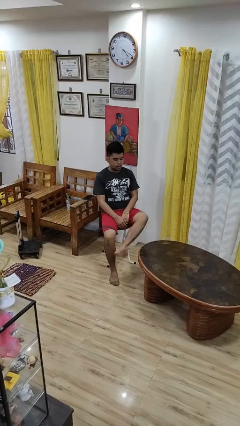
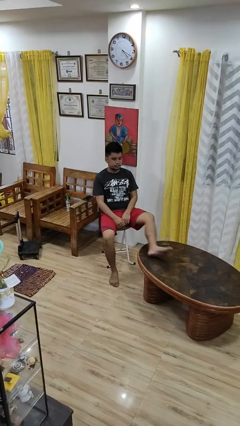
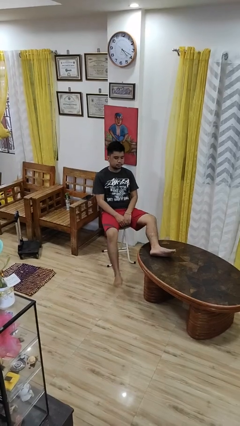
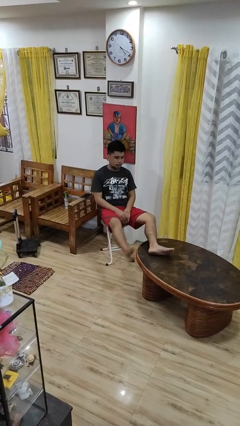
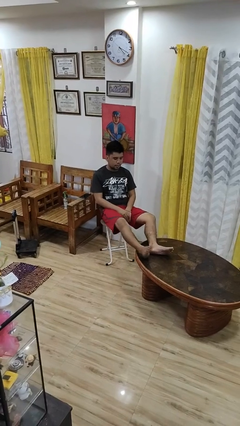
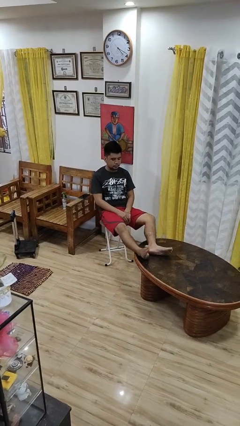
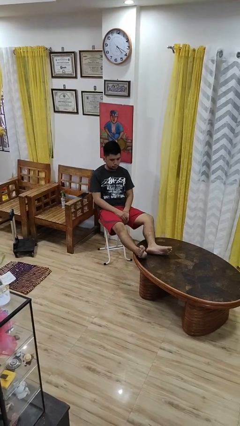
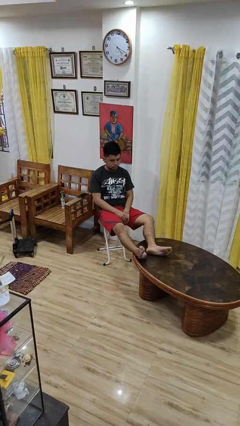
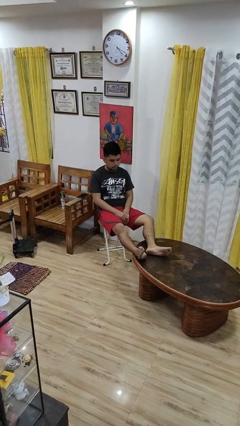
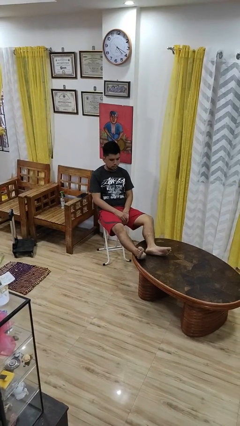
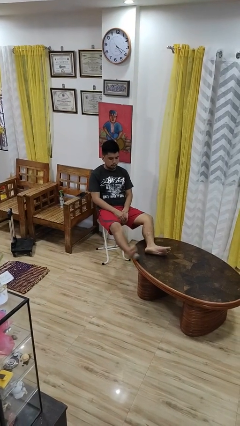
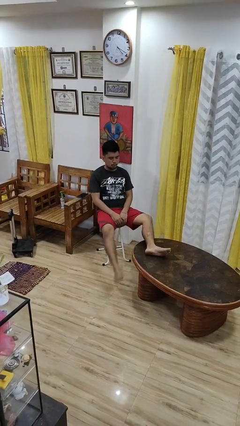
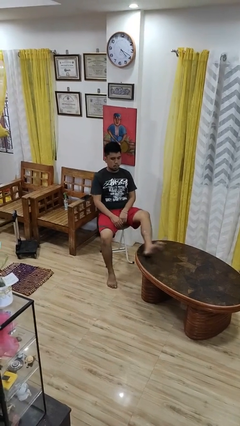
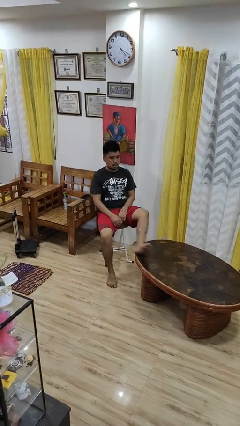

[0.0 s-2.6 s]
person puts feet up

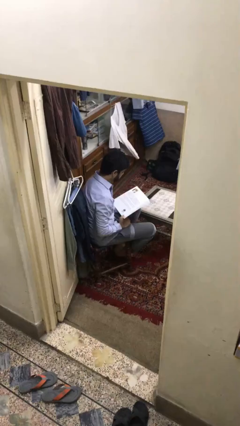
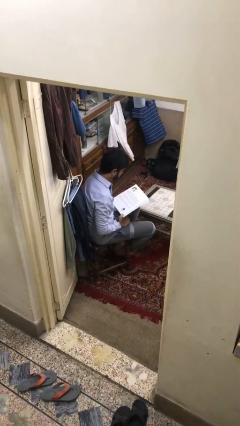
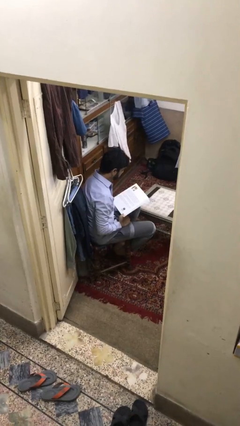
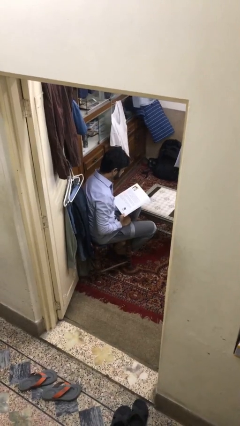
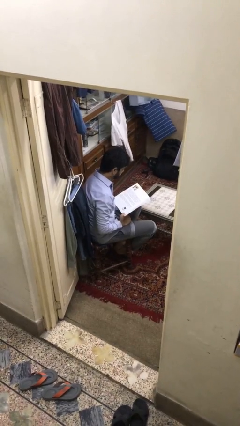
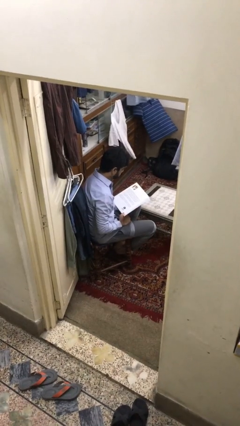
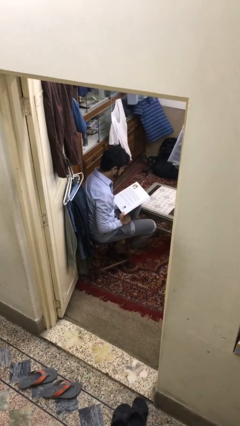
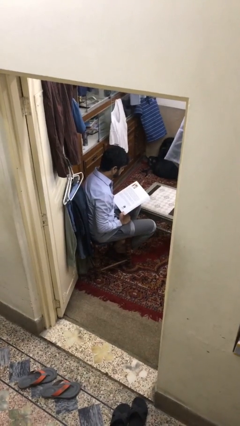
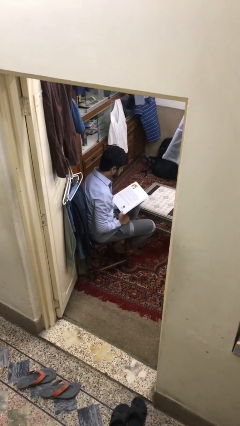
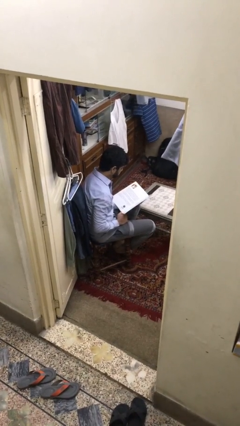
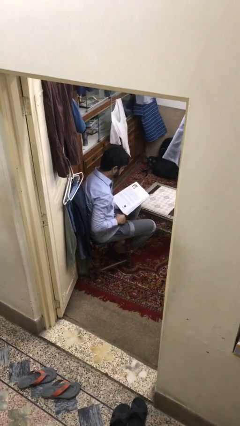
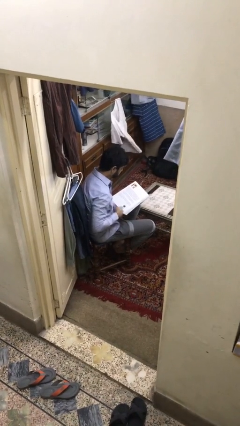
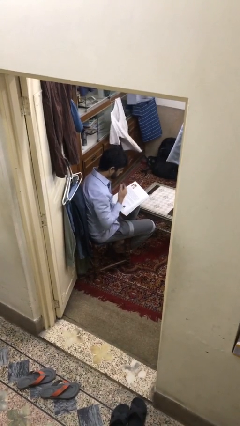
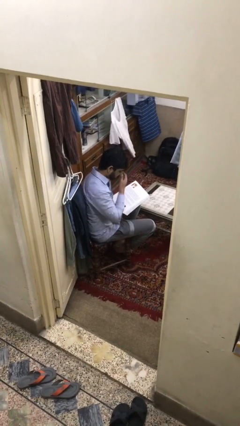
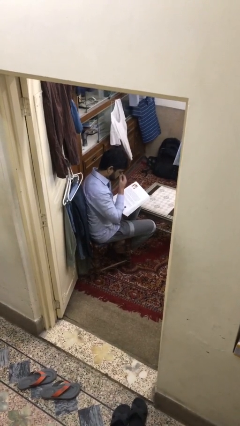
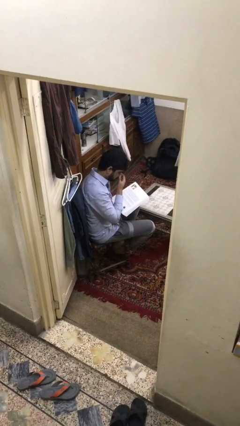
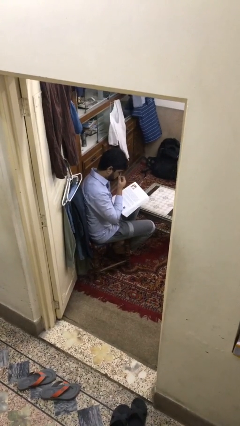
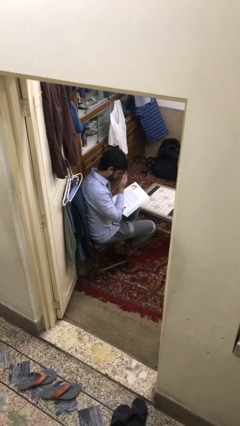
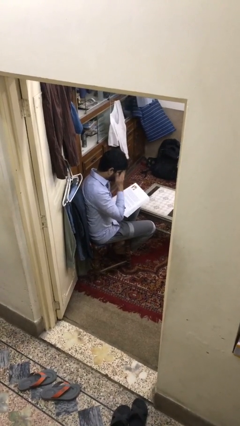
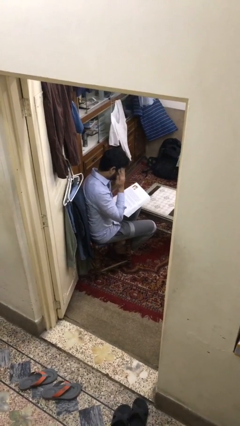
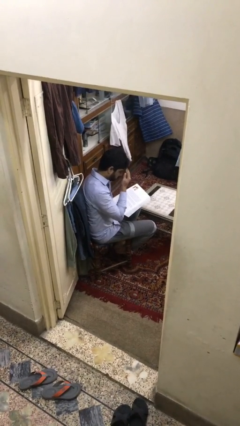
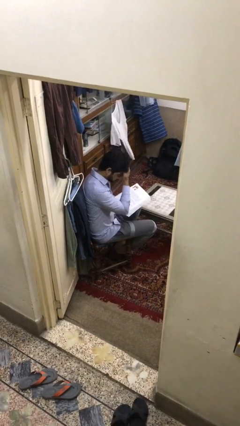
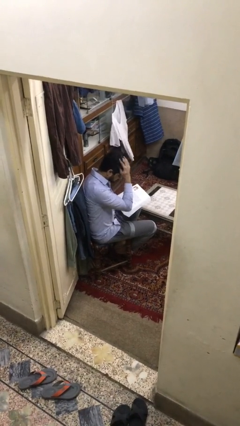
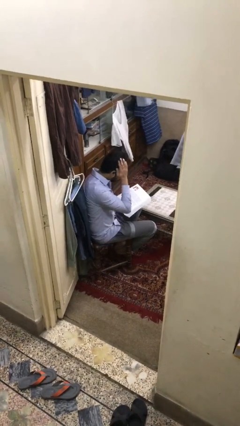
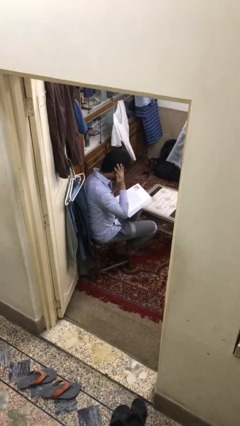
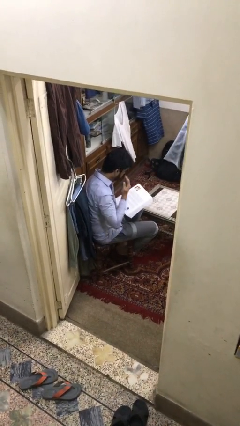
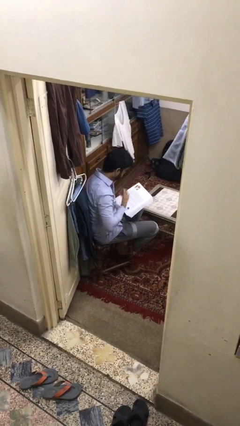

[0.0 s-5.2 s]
person reads document

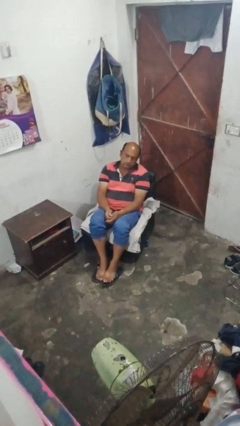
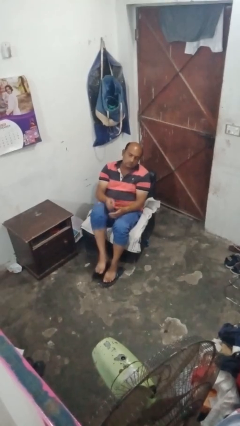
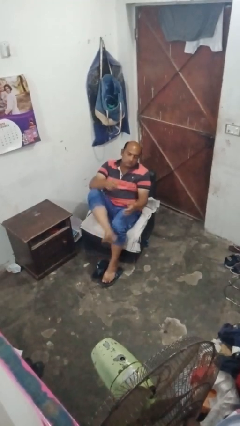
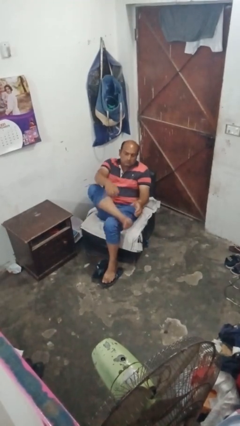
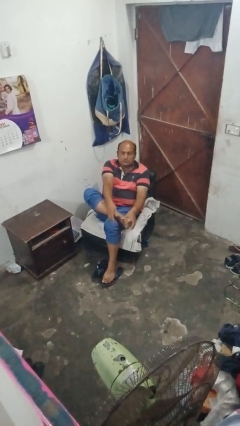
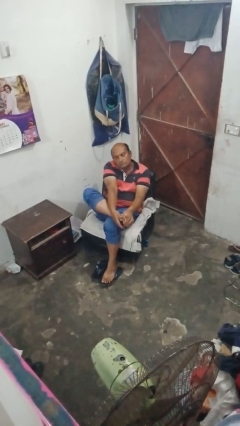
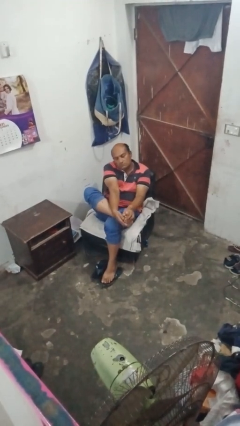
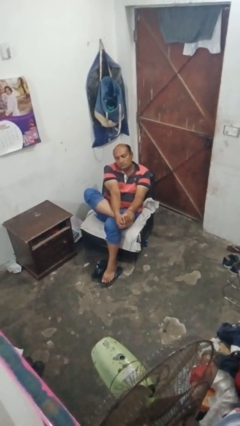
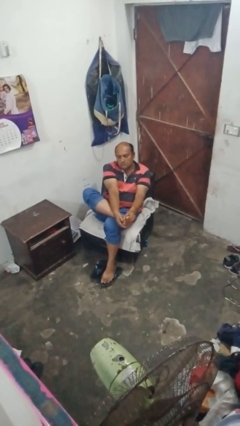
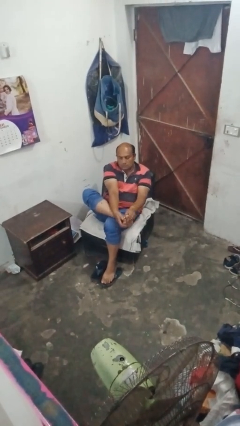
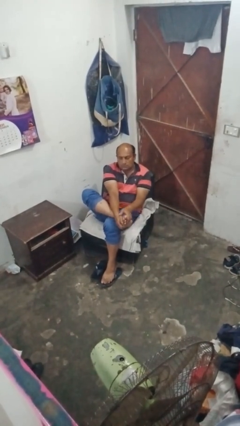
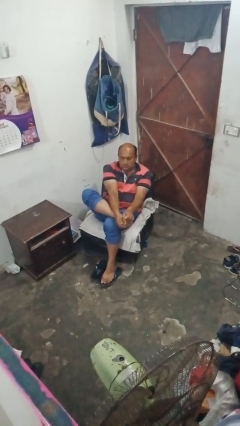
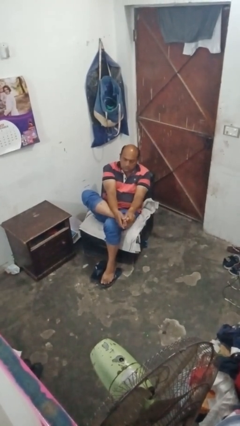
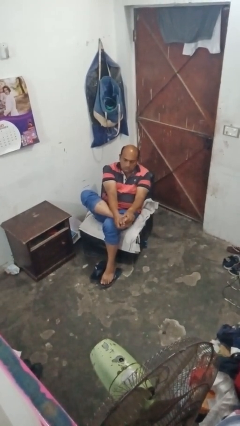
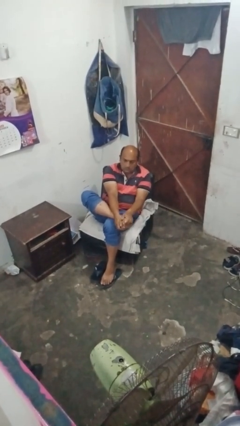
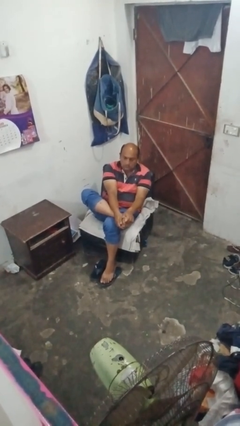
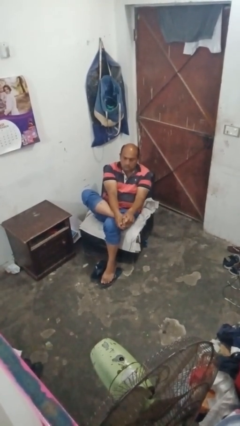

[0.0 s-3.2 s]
person rubs foot

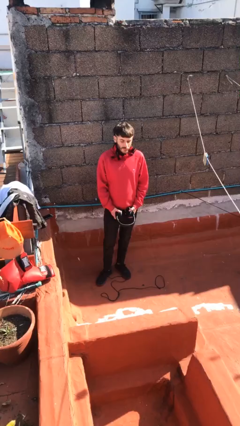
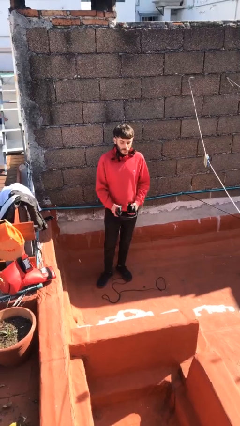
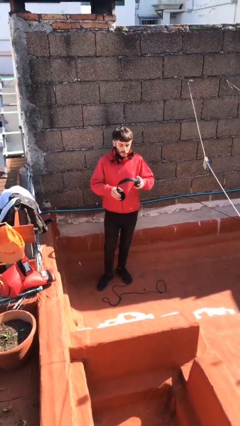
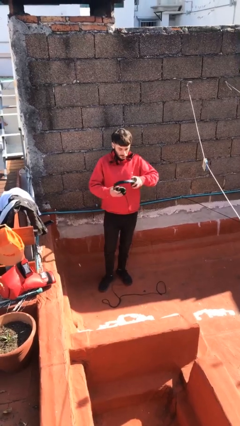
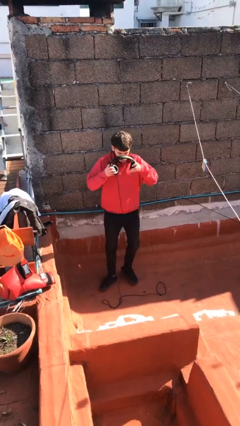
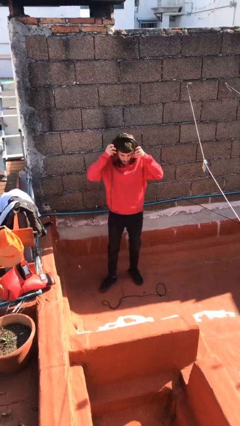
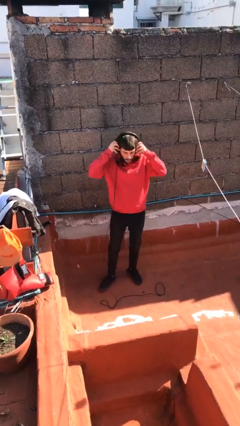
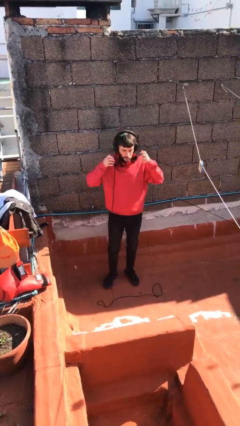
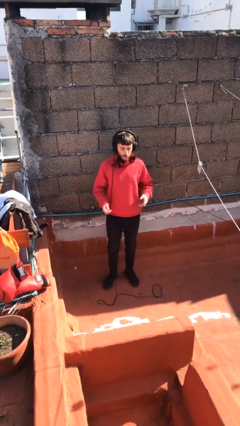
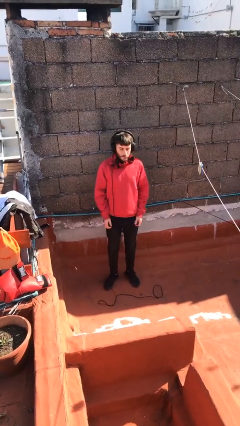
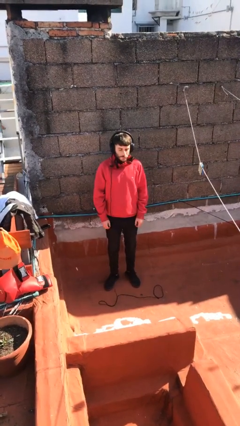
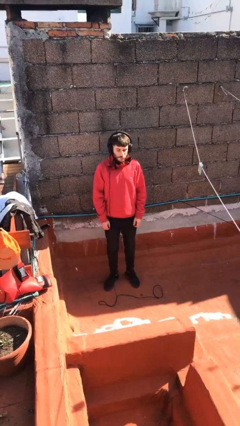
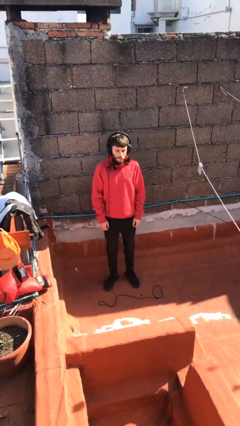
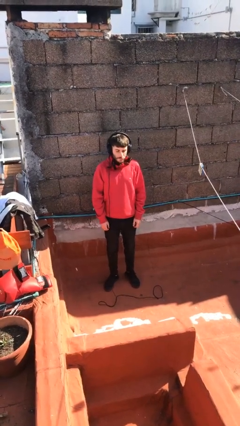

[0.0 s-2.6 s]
person puts on headphones

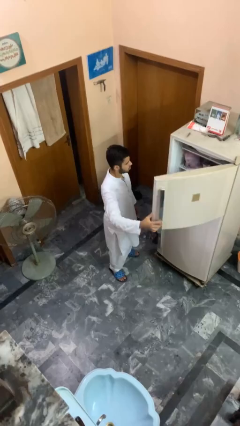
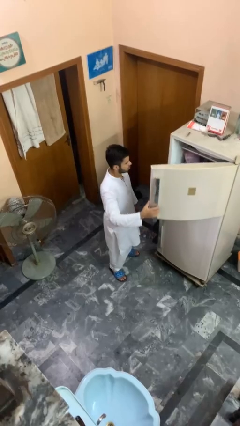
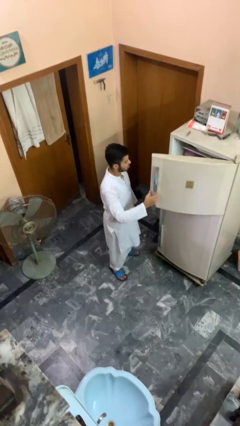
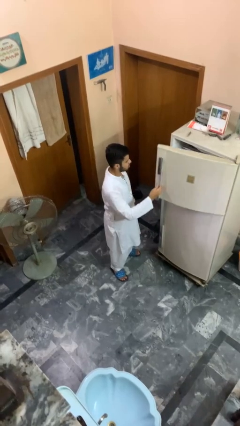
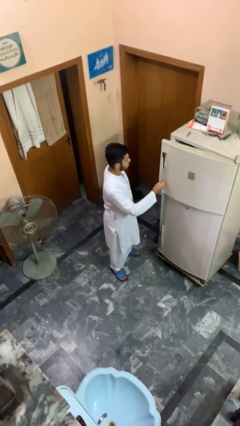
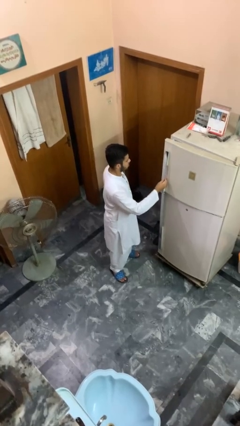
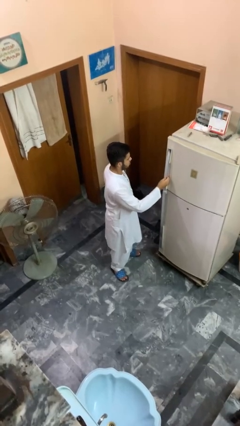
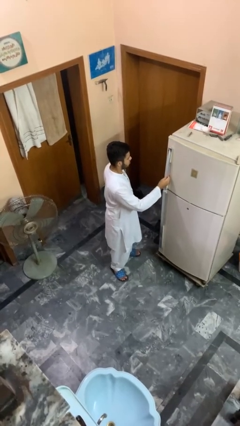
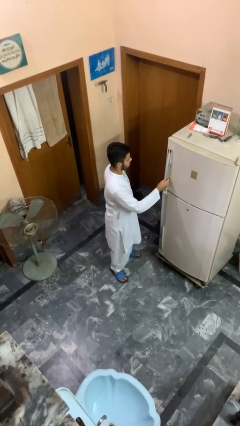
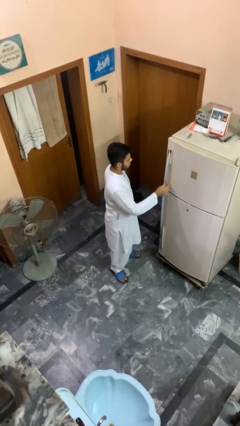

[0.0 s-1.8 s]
person closes refrigerator

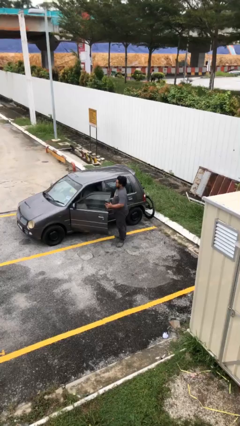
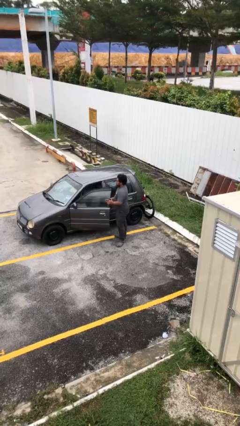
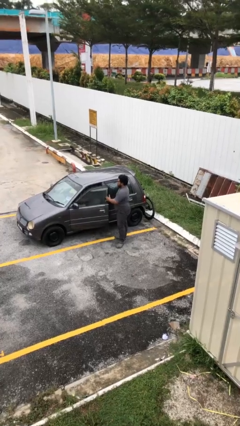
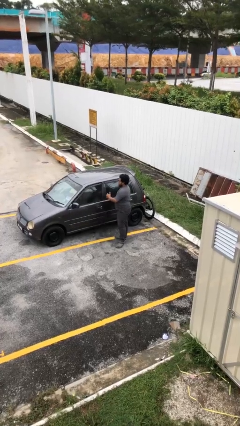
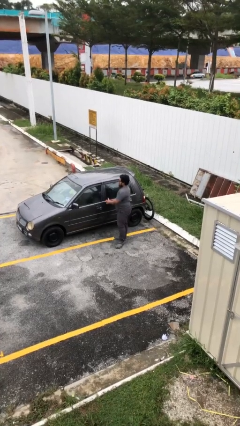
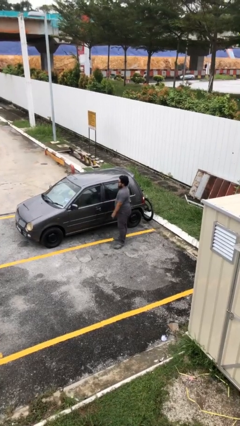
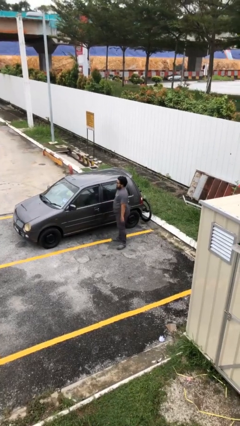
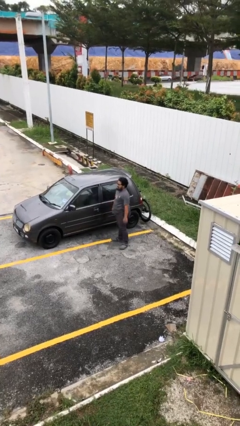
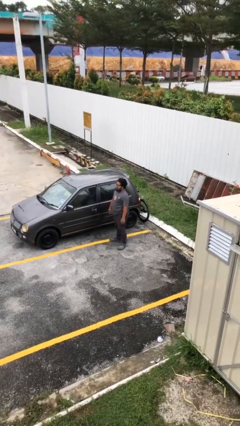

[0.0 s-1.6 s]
person closes car door

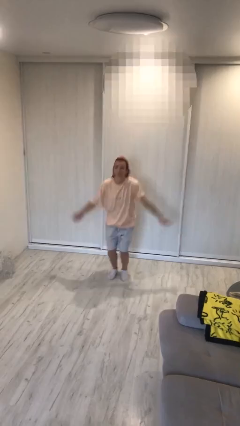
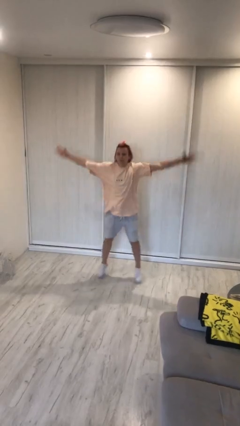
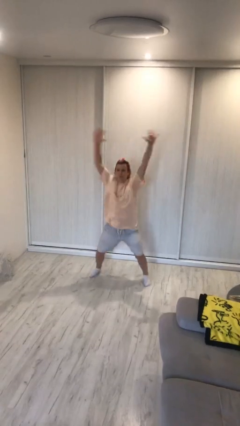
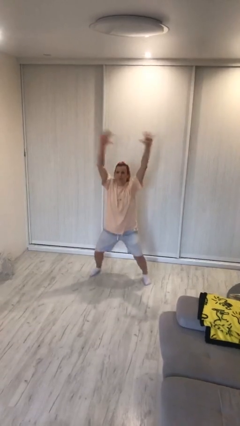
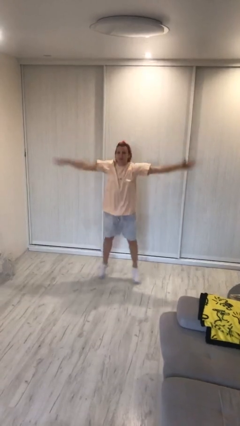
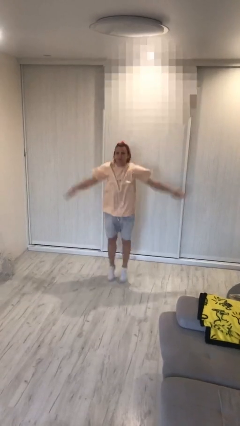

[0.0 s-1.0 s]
person exercises with jumping jacks
